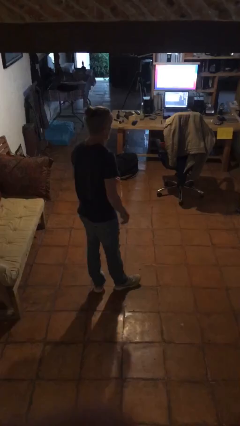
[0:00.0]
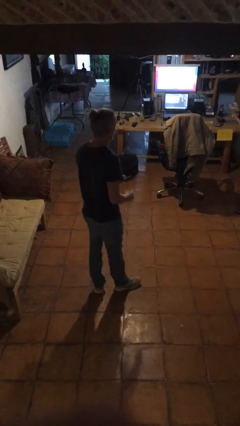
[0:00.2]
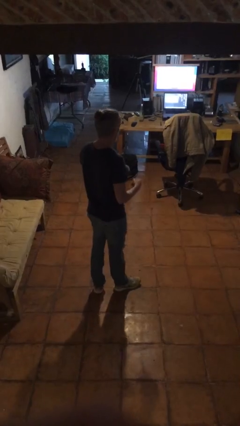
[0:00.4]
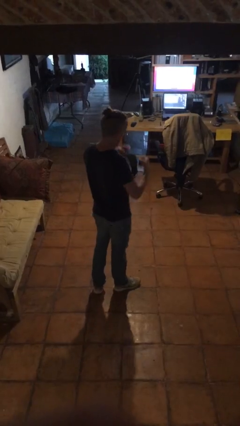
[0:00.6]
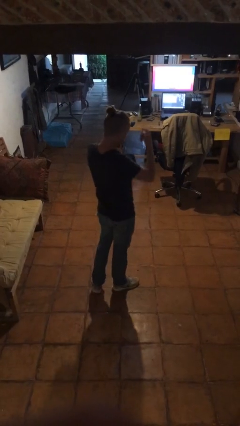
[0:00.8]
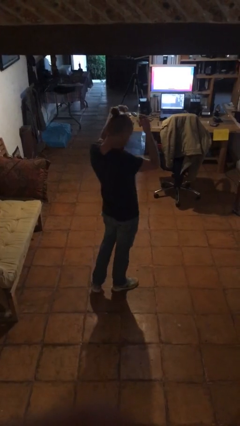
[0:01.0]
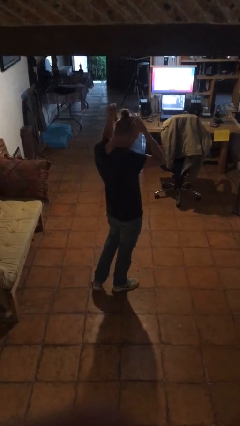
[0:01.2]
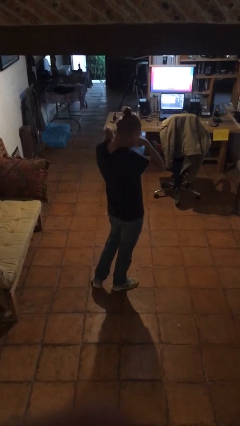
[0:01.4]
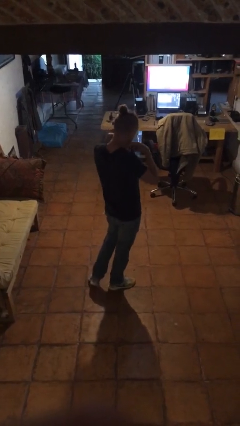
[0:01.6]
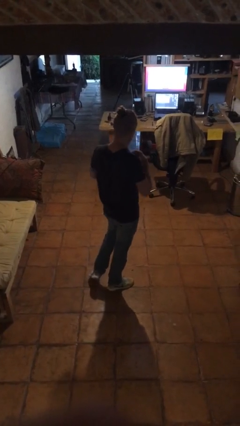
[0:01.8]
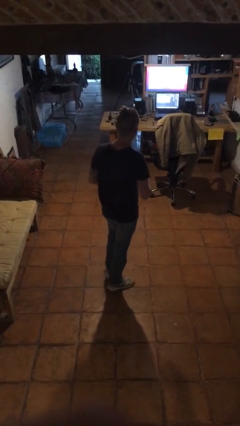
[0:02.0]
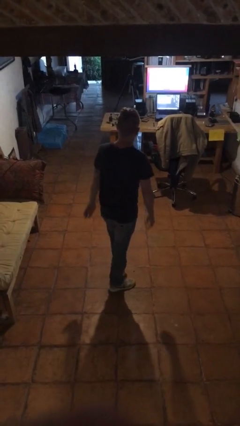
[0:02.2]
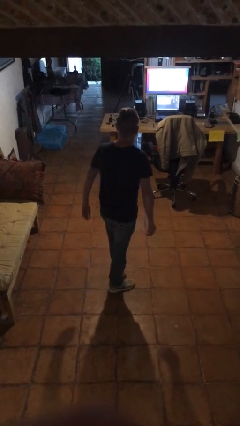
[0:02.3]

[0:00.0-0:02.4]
person puts on necklace

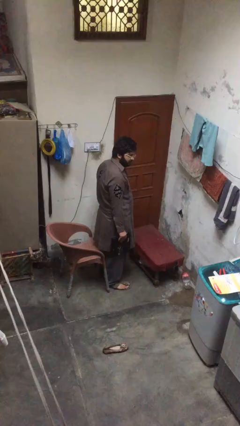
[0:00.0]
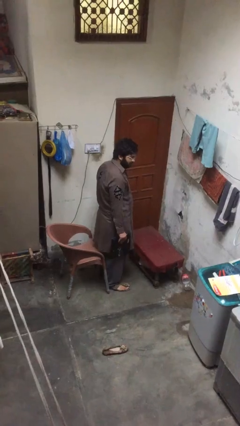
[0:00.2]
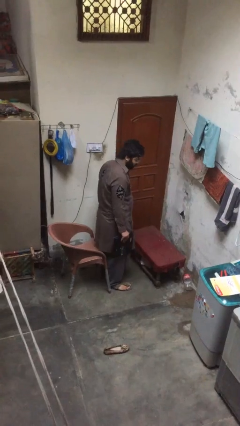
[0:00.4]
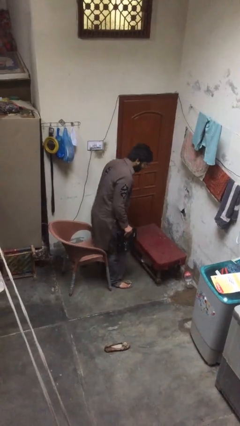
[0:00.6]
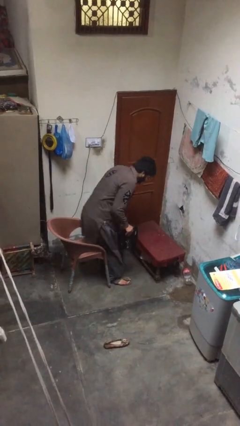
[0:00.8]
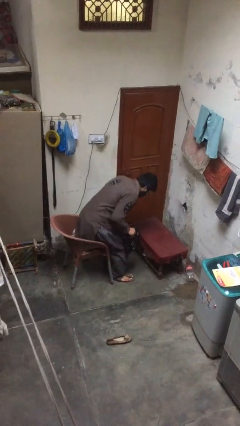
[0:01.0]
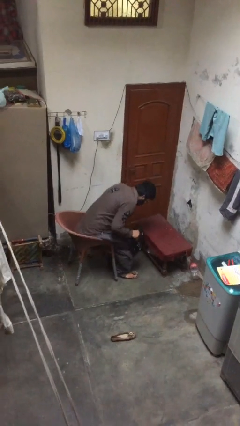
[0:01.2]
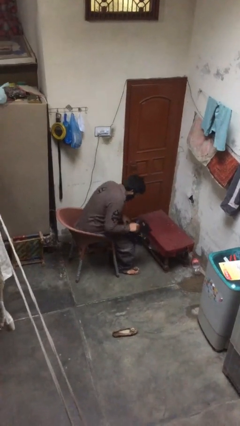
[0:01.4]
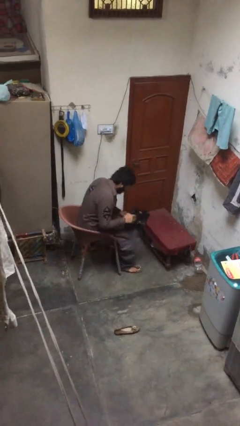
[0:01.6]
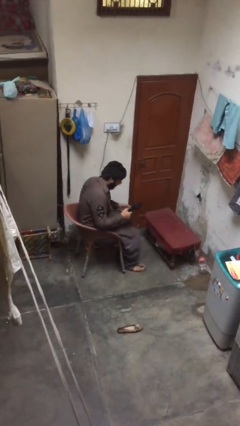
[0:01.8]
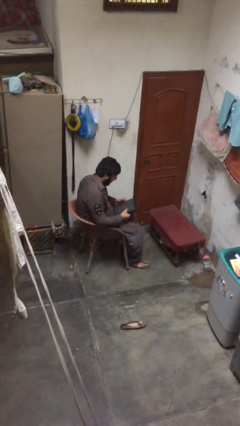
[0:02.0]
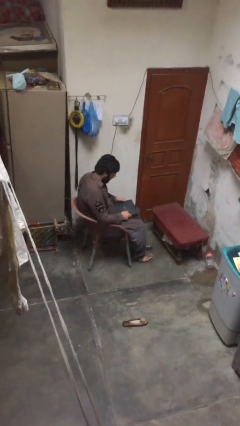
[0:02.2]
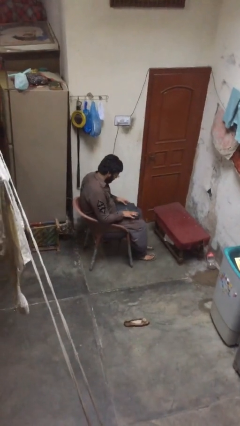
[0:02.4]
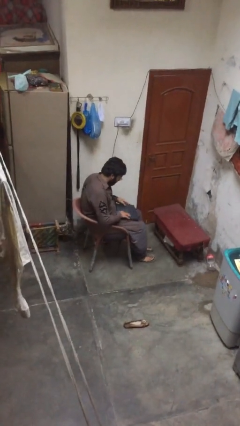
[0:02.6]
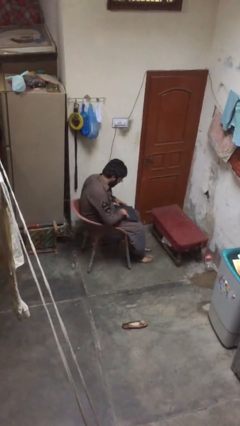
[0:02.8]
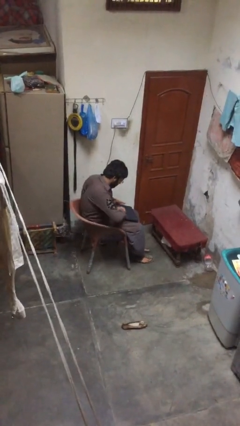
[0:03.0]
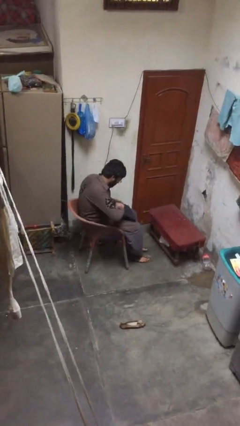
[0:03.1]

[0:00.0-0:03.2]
person sits down

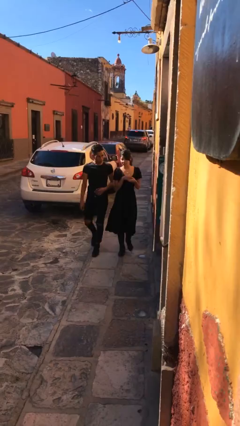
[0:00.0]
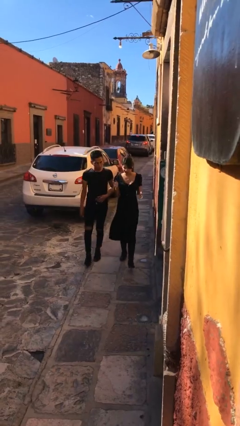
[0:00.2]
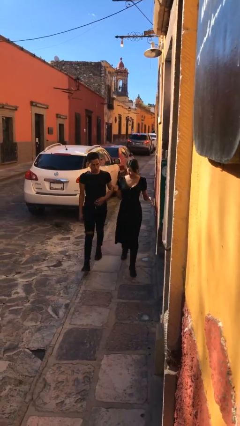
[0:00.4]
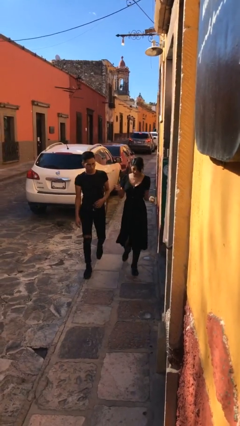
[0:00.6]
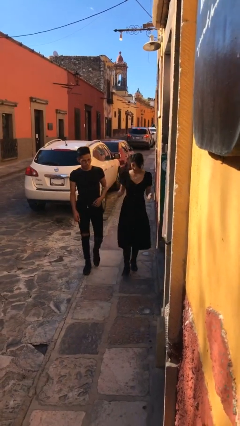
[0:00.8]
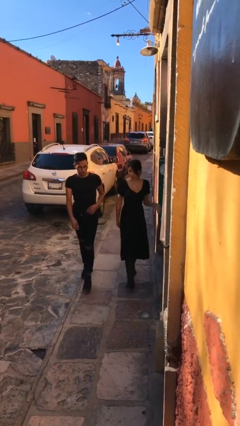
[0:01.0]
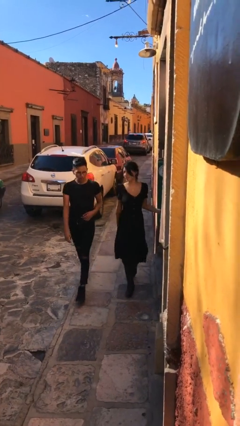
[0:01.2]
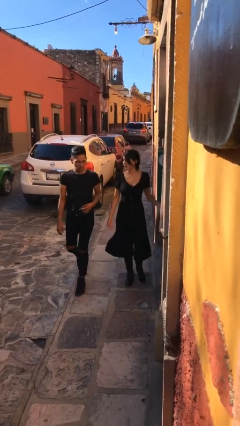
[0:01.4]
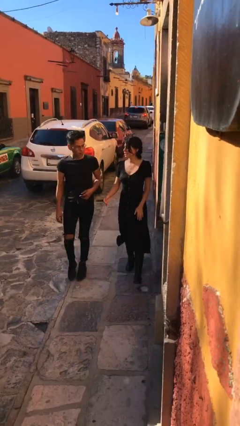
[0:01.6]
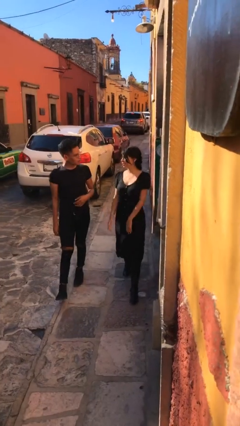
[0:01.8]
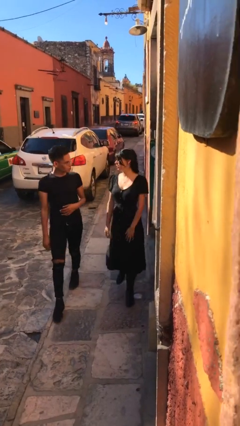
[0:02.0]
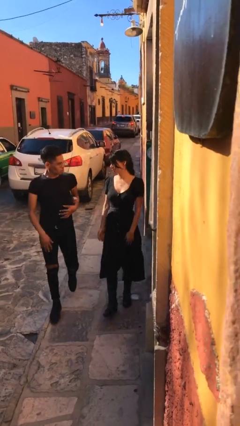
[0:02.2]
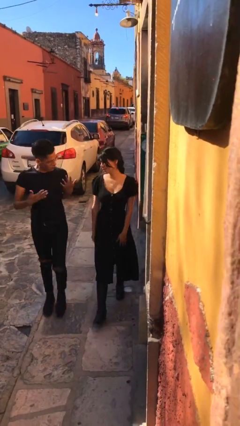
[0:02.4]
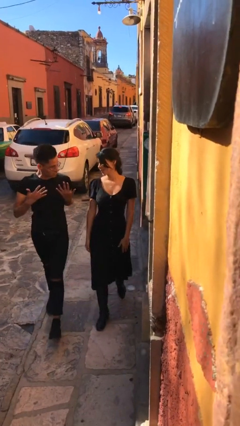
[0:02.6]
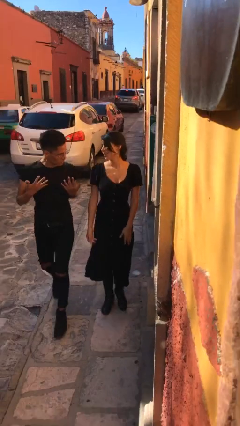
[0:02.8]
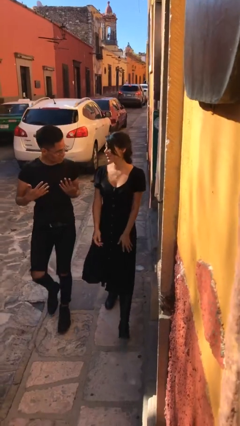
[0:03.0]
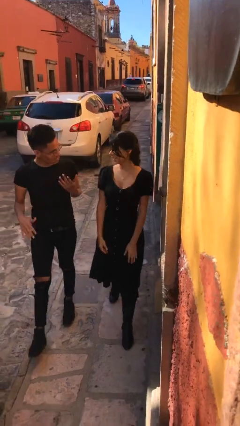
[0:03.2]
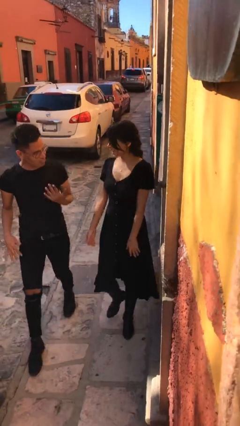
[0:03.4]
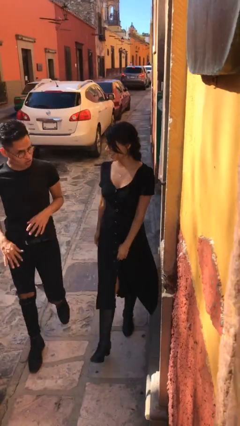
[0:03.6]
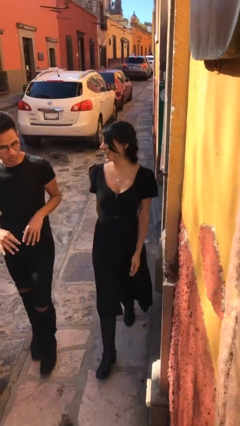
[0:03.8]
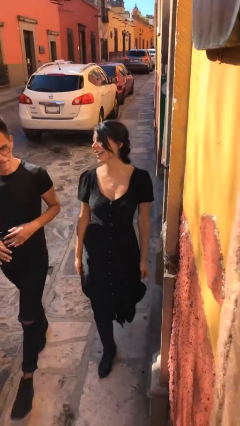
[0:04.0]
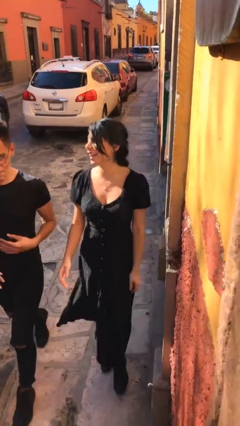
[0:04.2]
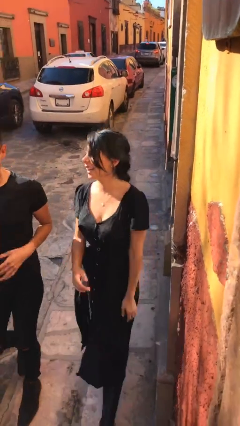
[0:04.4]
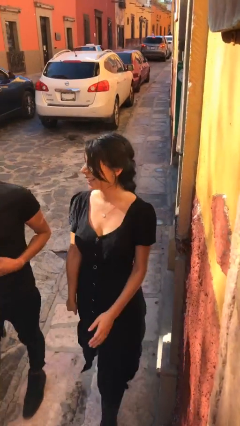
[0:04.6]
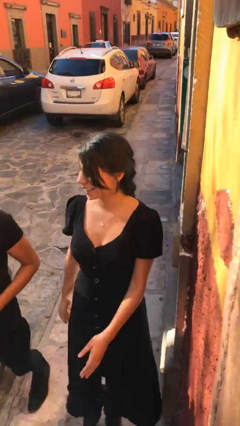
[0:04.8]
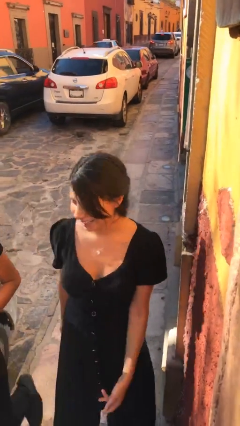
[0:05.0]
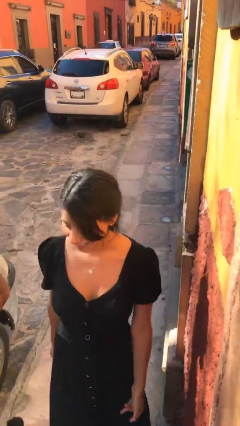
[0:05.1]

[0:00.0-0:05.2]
person talks to person

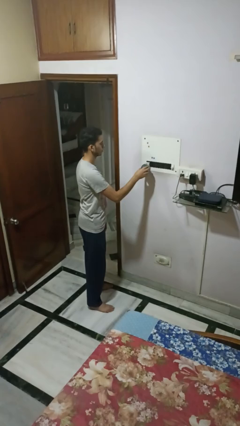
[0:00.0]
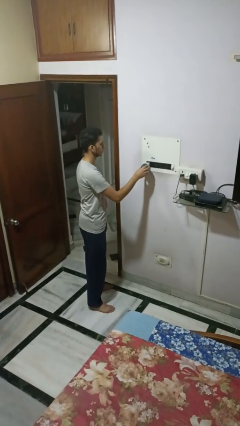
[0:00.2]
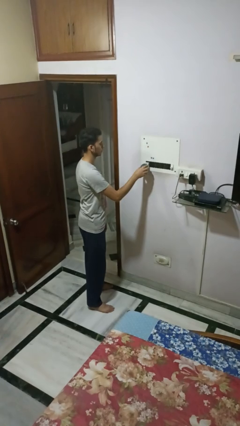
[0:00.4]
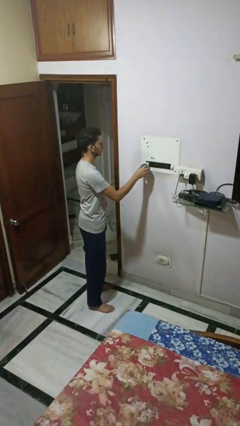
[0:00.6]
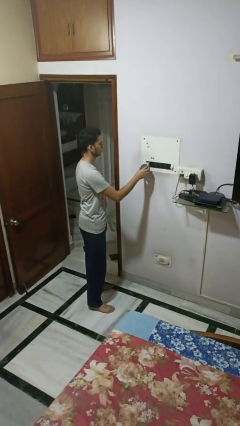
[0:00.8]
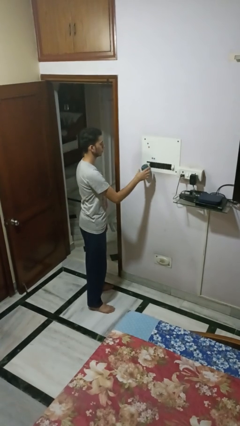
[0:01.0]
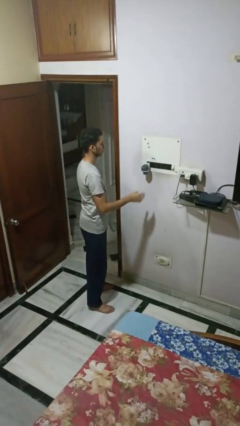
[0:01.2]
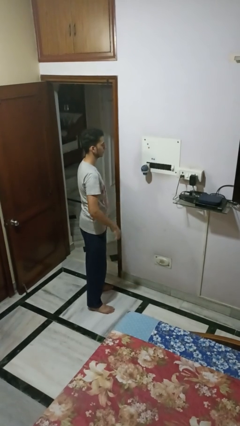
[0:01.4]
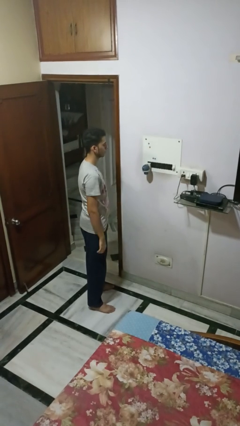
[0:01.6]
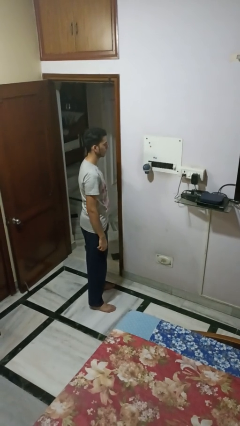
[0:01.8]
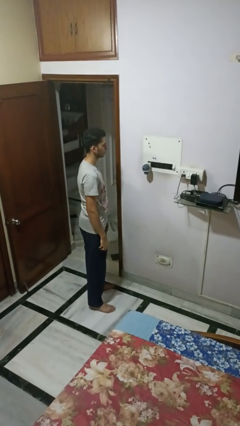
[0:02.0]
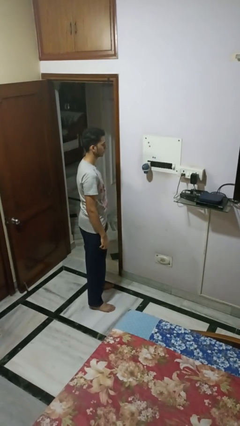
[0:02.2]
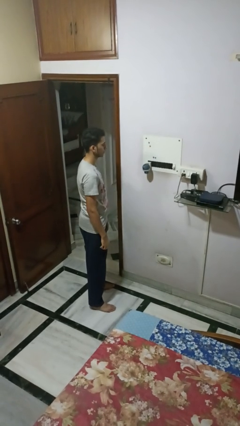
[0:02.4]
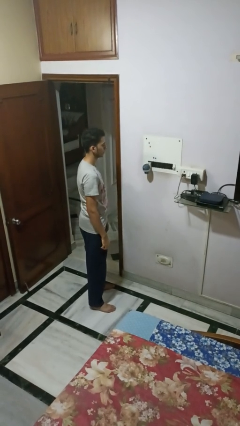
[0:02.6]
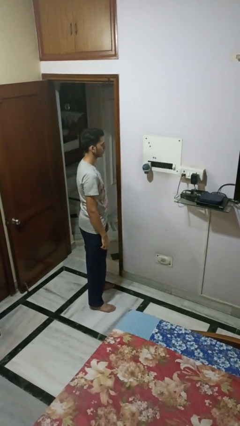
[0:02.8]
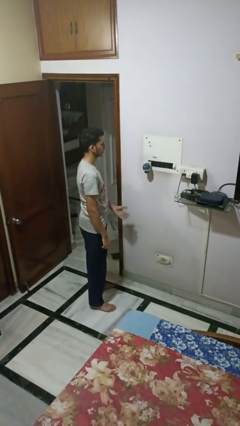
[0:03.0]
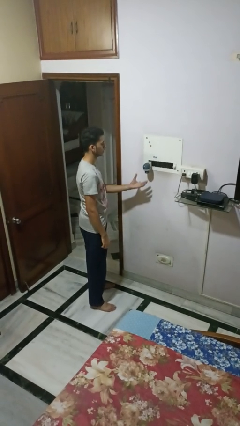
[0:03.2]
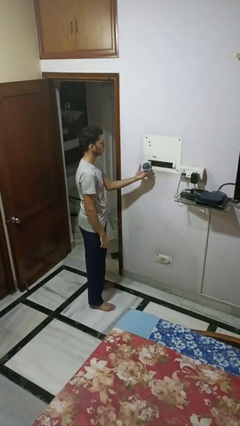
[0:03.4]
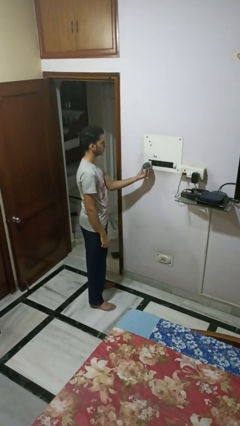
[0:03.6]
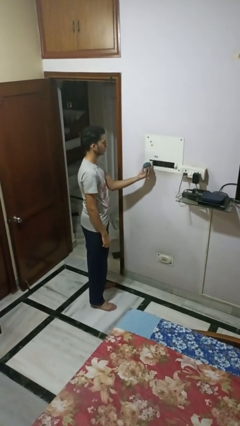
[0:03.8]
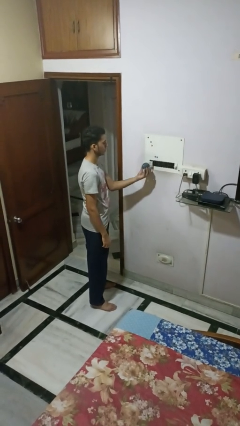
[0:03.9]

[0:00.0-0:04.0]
person plugs into electrical socket

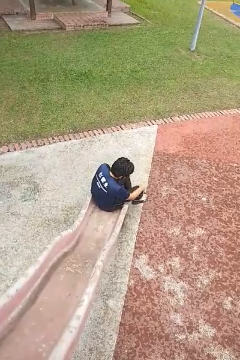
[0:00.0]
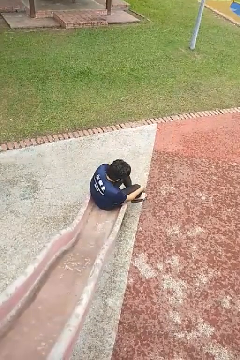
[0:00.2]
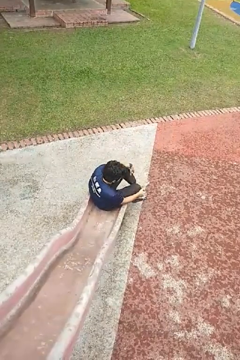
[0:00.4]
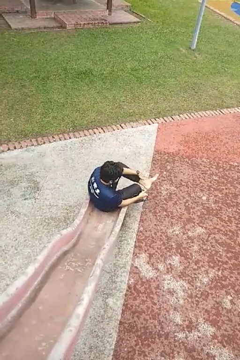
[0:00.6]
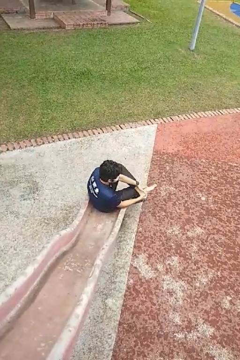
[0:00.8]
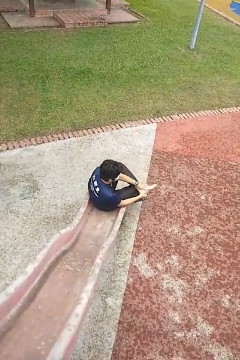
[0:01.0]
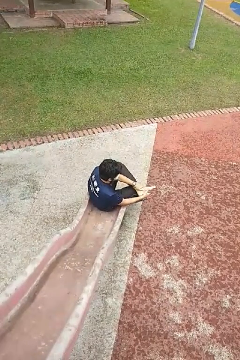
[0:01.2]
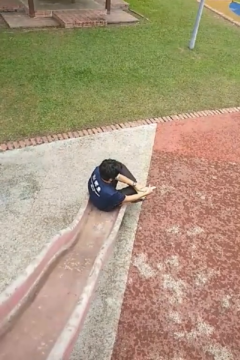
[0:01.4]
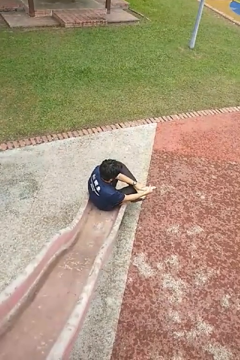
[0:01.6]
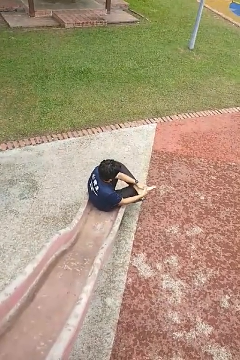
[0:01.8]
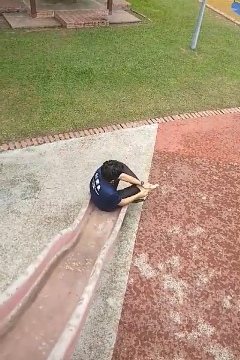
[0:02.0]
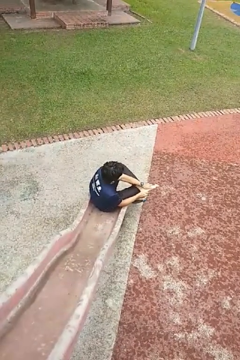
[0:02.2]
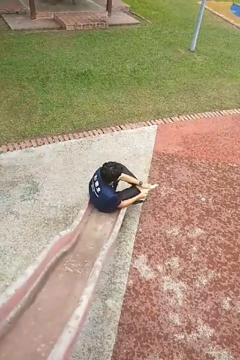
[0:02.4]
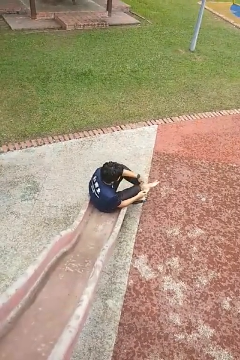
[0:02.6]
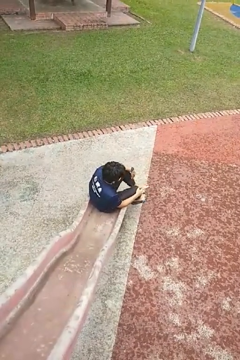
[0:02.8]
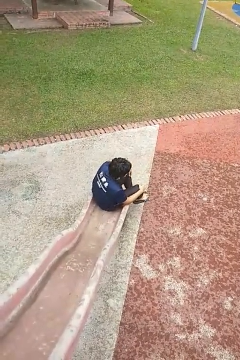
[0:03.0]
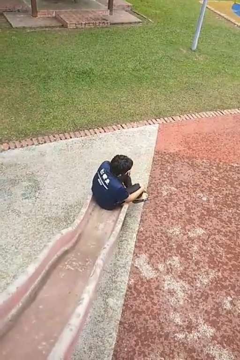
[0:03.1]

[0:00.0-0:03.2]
person rubs foot

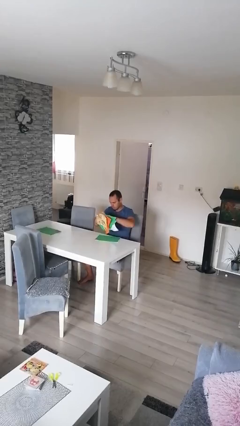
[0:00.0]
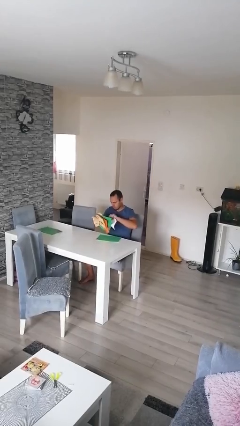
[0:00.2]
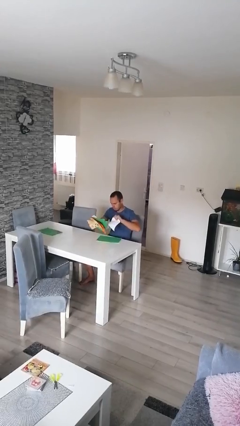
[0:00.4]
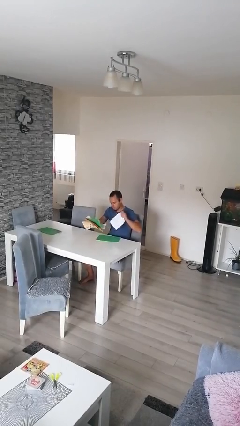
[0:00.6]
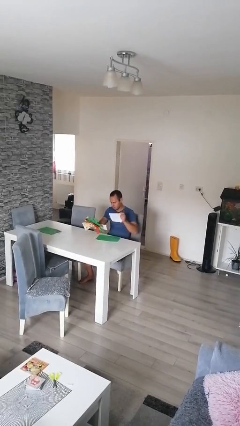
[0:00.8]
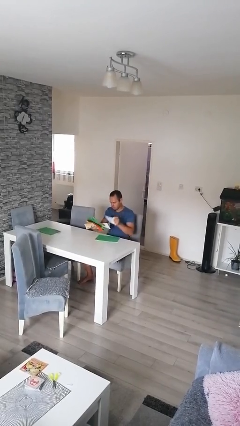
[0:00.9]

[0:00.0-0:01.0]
person tears paper
